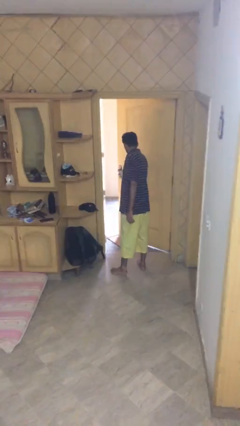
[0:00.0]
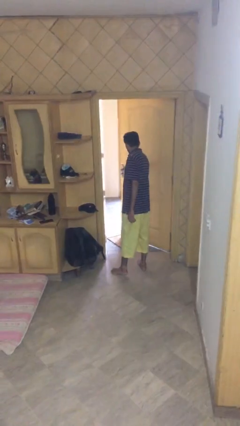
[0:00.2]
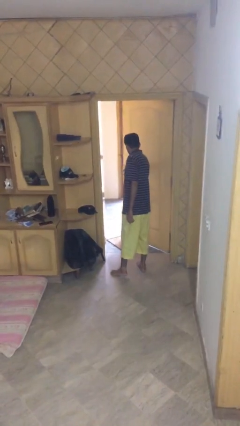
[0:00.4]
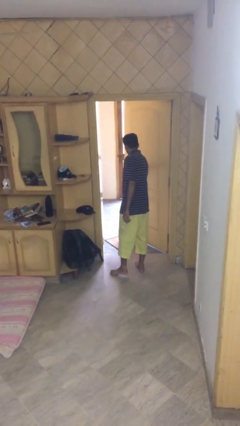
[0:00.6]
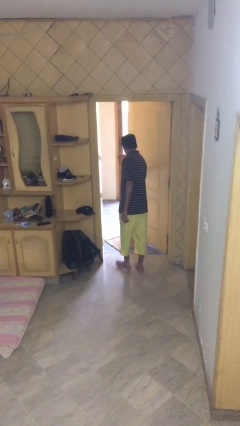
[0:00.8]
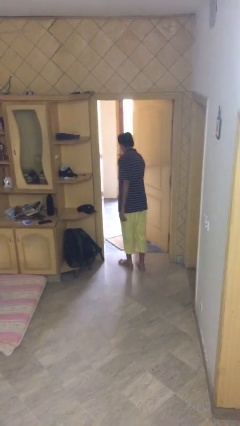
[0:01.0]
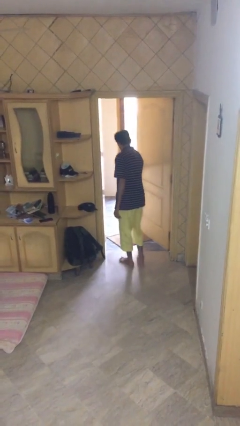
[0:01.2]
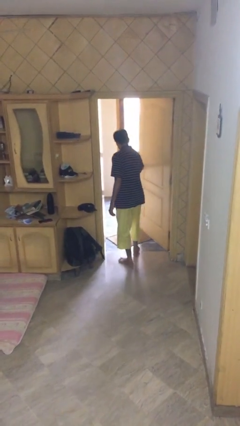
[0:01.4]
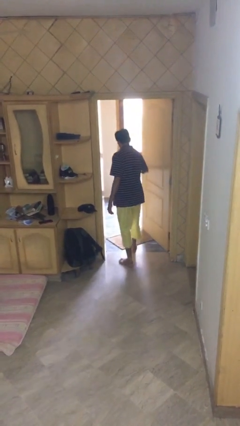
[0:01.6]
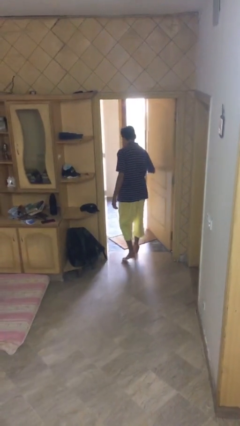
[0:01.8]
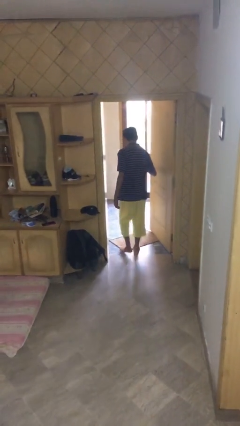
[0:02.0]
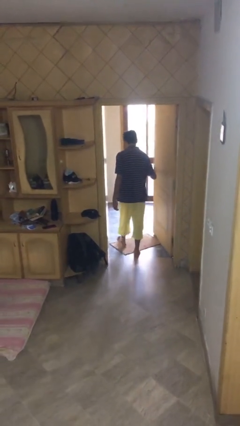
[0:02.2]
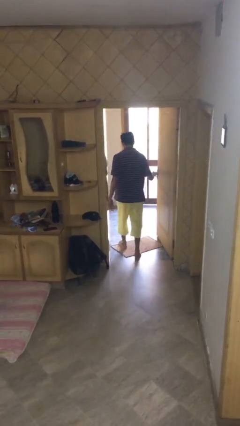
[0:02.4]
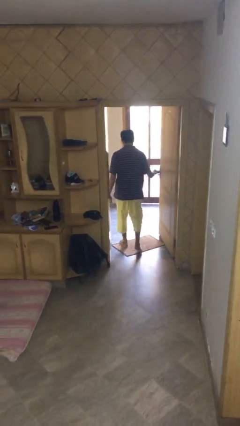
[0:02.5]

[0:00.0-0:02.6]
person exits scene through structure

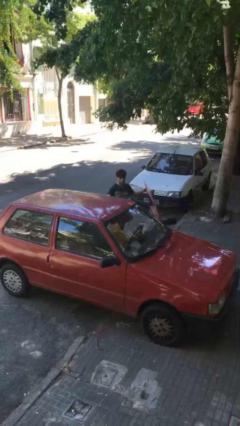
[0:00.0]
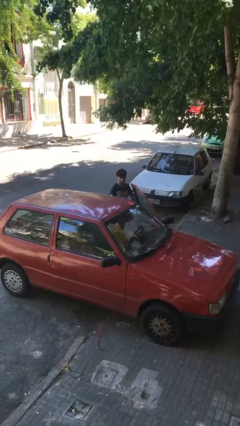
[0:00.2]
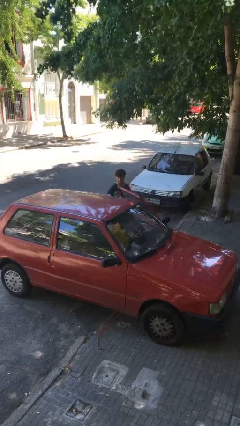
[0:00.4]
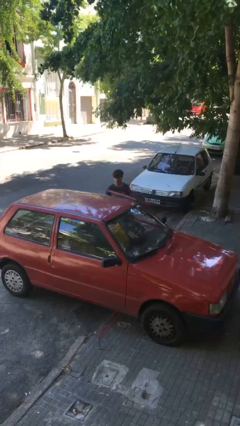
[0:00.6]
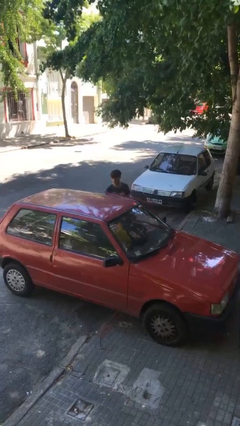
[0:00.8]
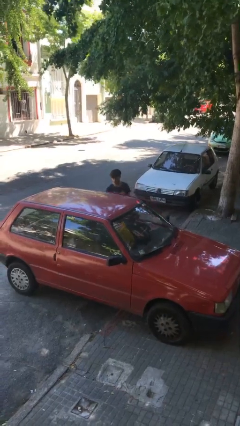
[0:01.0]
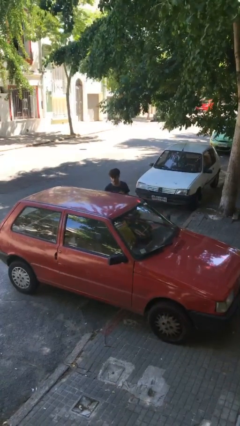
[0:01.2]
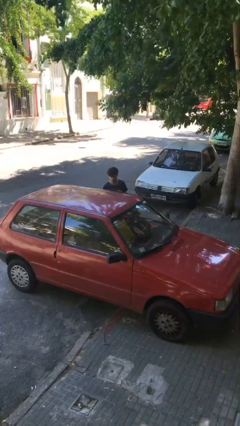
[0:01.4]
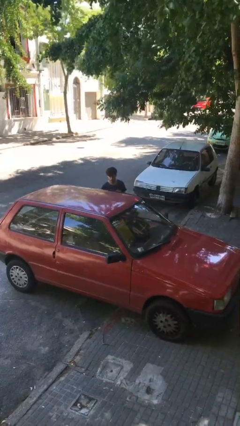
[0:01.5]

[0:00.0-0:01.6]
person closes car door

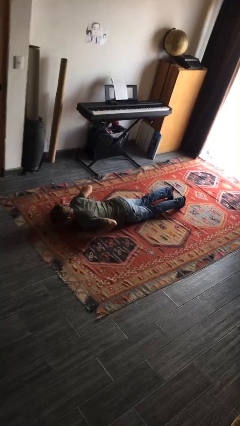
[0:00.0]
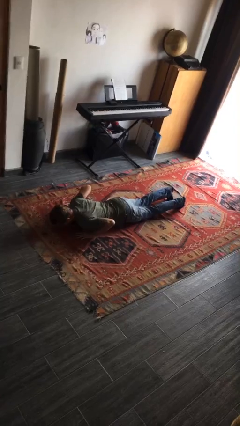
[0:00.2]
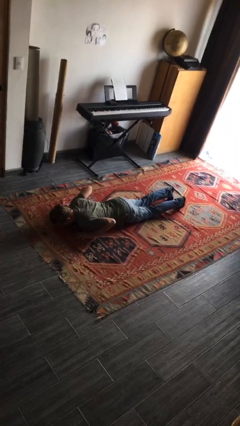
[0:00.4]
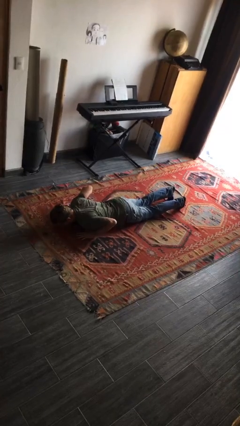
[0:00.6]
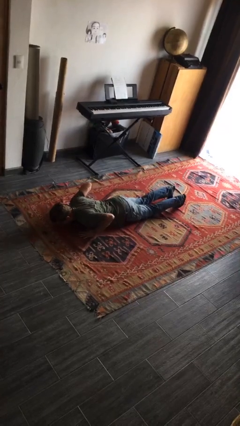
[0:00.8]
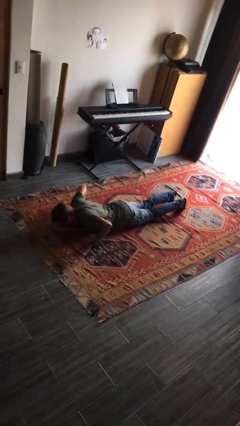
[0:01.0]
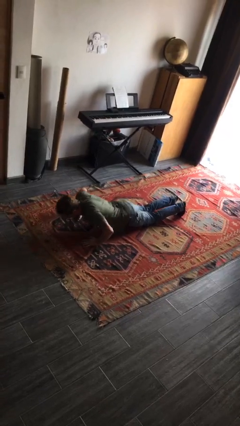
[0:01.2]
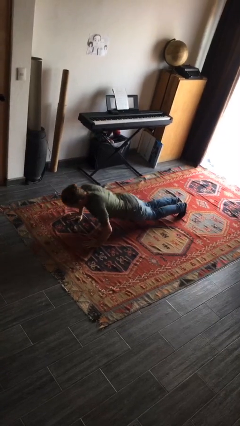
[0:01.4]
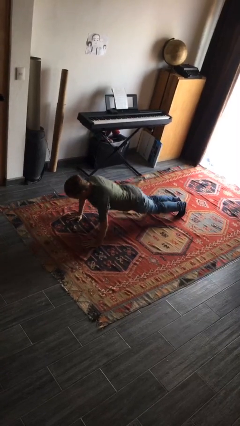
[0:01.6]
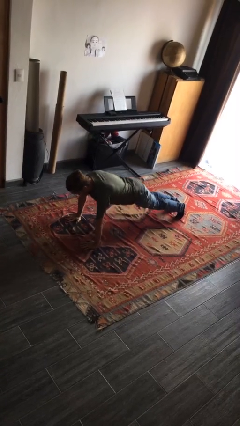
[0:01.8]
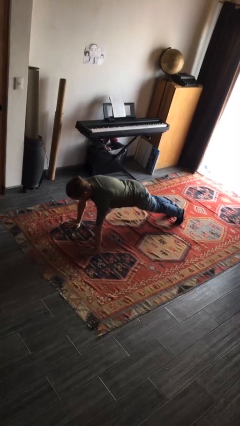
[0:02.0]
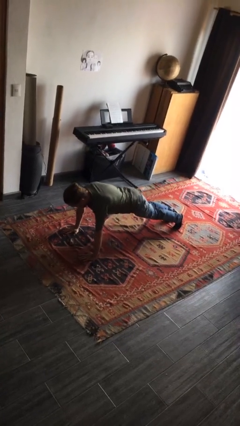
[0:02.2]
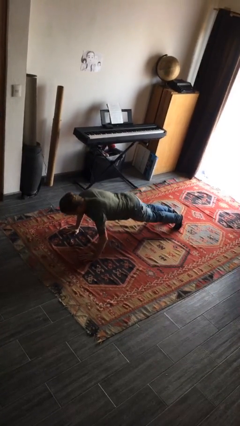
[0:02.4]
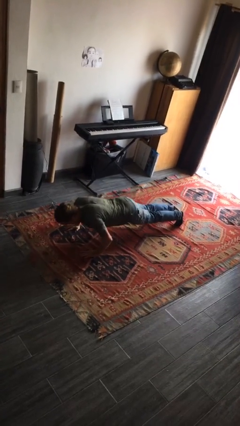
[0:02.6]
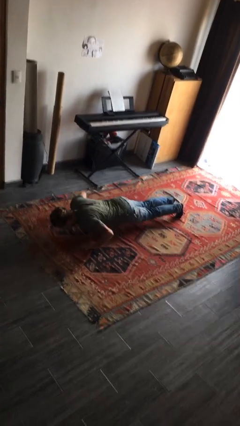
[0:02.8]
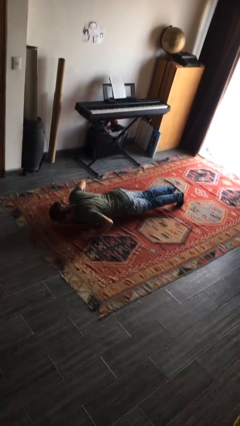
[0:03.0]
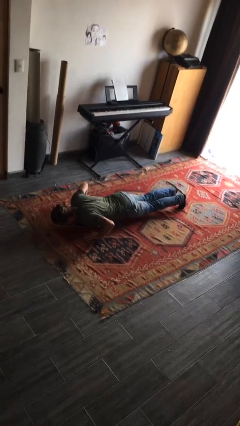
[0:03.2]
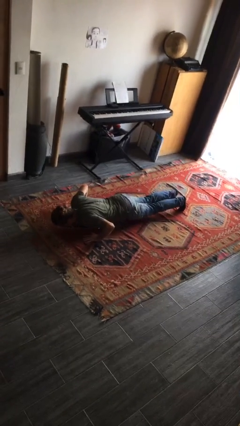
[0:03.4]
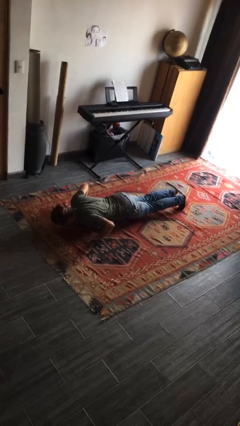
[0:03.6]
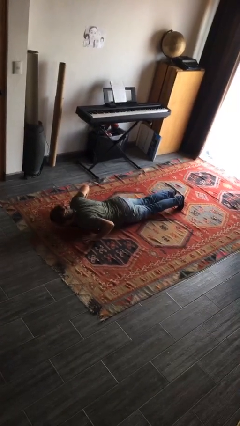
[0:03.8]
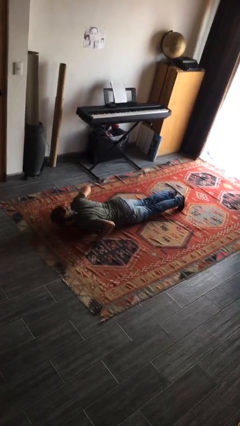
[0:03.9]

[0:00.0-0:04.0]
person exercises with pushup

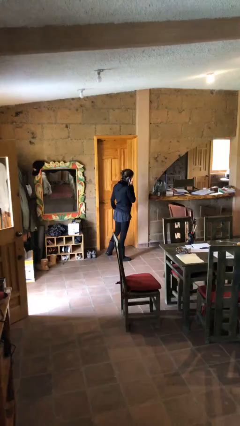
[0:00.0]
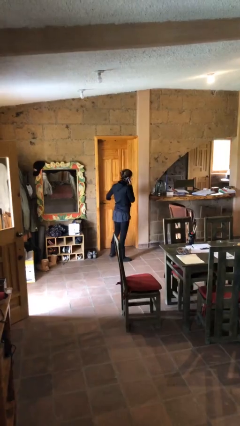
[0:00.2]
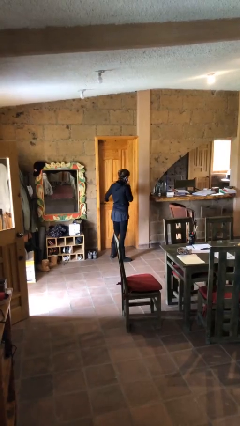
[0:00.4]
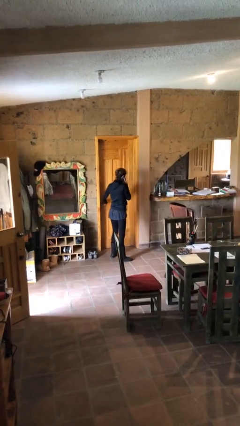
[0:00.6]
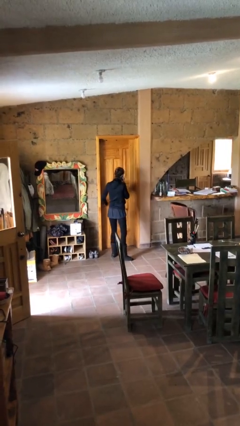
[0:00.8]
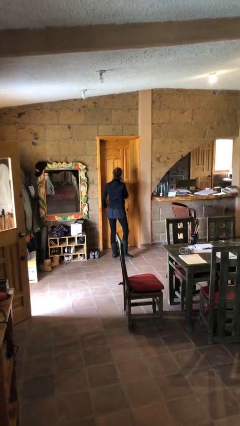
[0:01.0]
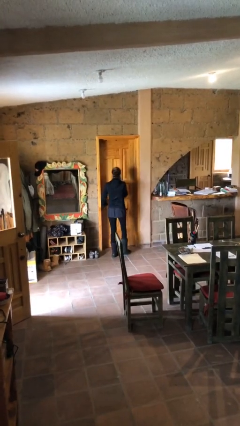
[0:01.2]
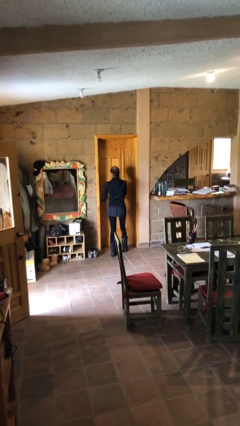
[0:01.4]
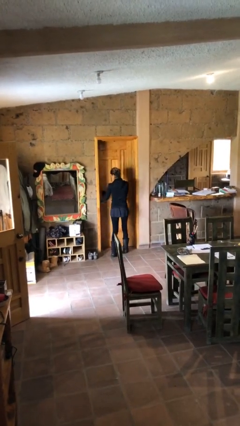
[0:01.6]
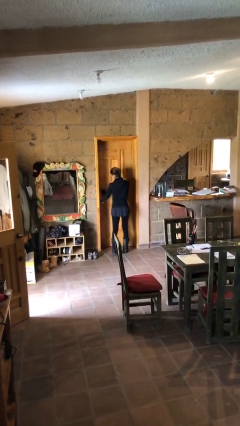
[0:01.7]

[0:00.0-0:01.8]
person opens facility door

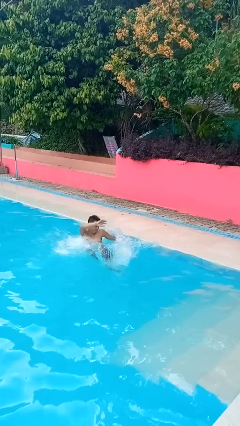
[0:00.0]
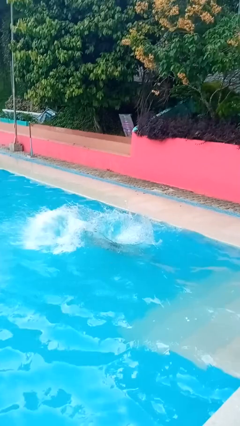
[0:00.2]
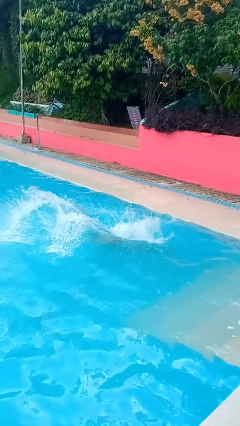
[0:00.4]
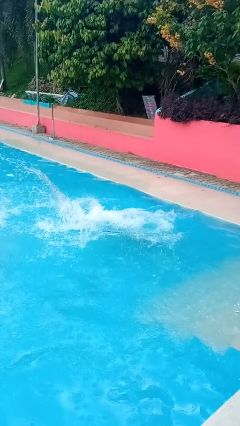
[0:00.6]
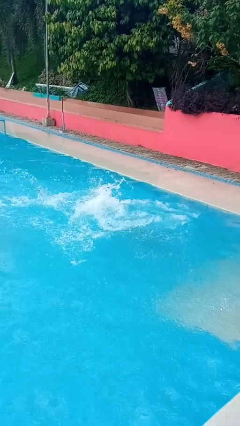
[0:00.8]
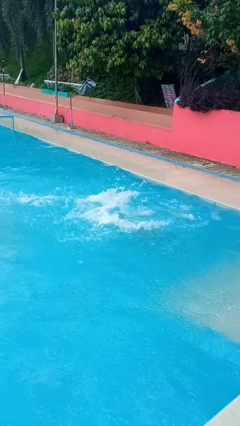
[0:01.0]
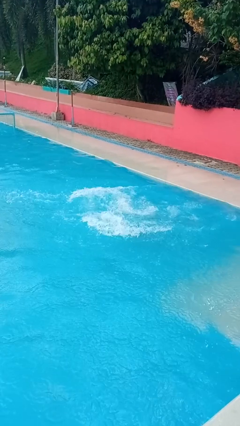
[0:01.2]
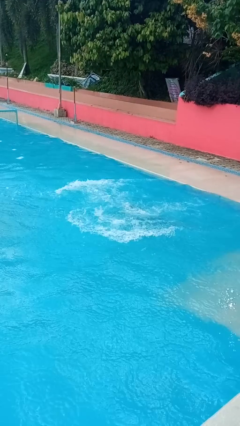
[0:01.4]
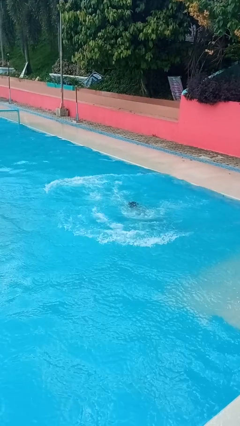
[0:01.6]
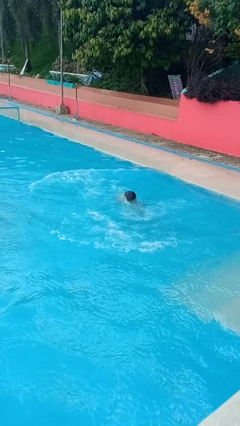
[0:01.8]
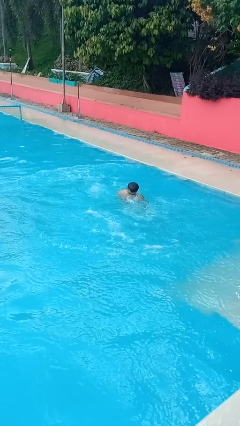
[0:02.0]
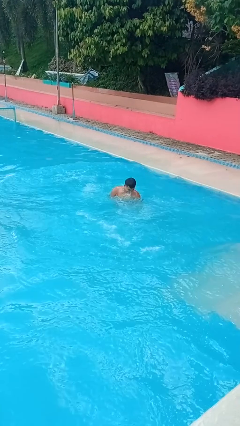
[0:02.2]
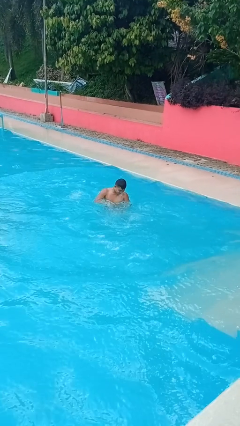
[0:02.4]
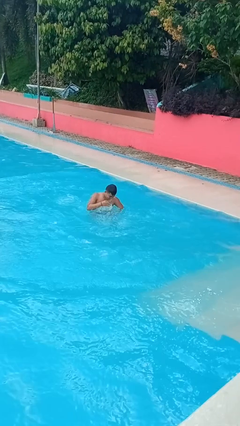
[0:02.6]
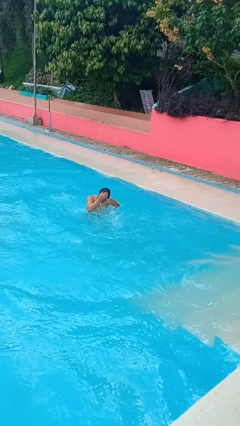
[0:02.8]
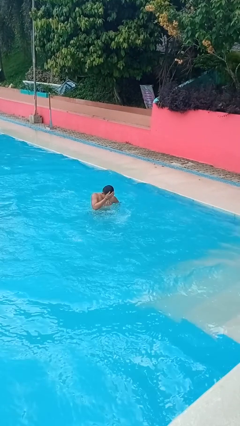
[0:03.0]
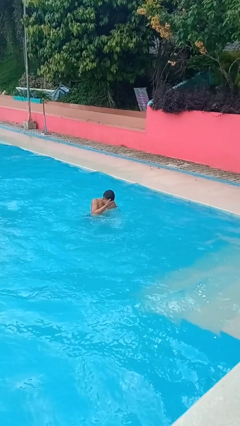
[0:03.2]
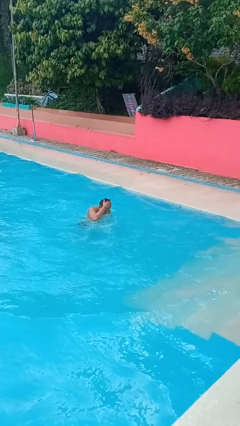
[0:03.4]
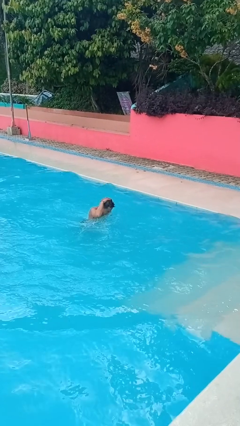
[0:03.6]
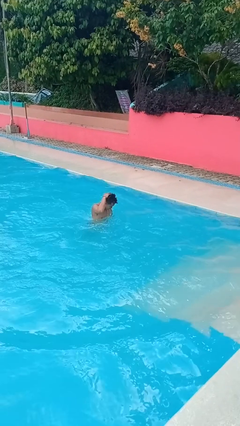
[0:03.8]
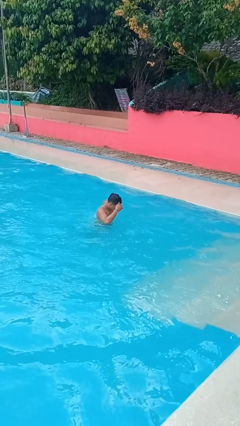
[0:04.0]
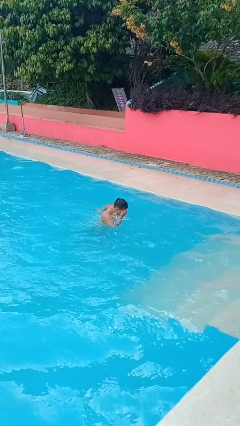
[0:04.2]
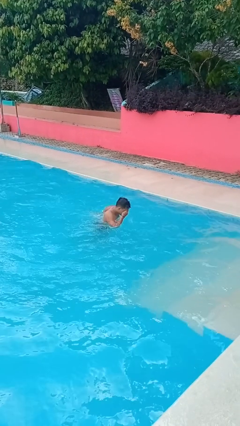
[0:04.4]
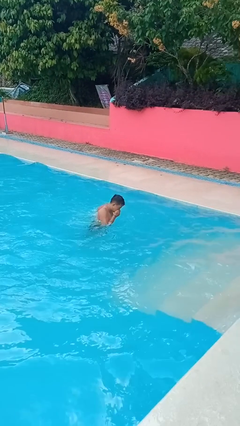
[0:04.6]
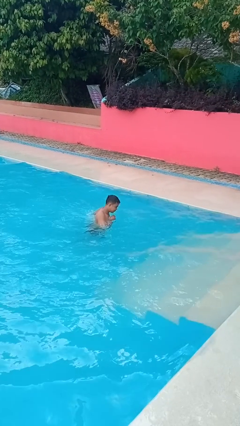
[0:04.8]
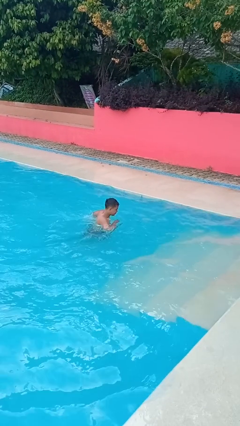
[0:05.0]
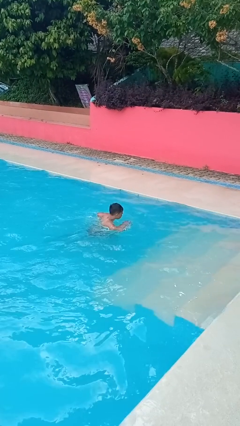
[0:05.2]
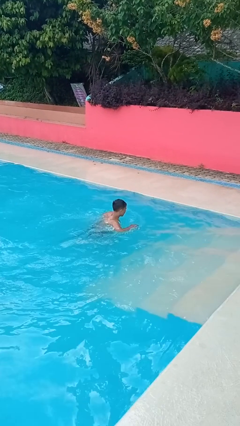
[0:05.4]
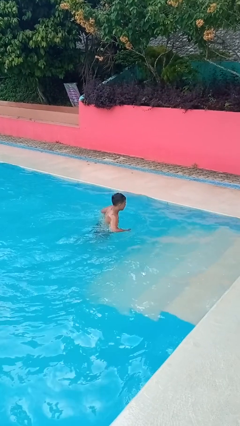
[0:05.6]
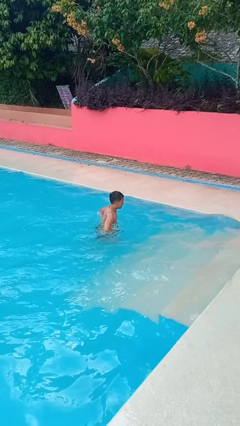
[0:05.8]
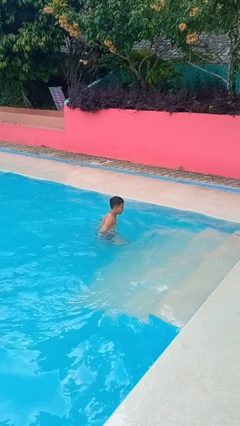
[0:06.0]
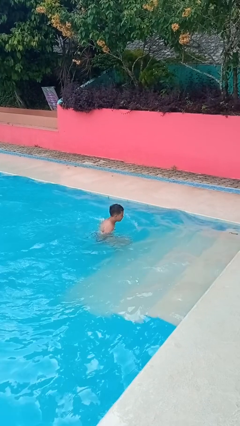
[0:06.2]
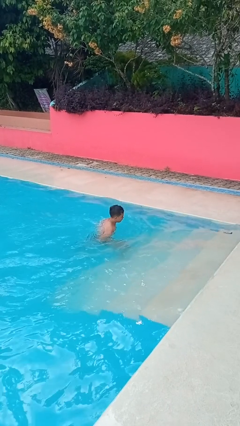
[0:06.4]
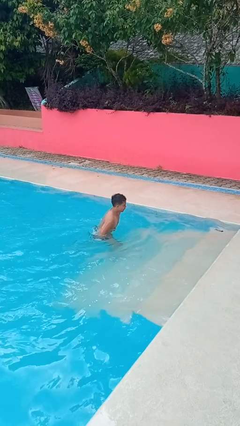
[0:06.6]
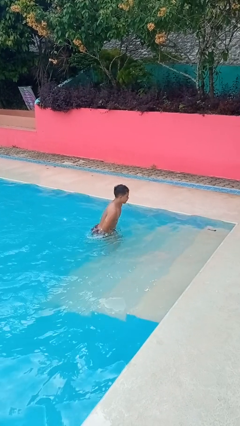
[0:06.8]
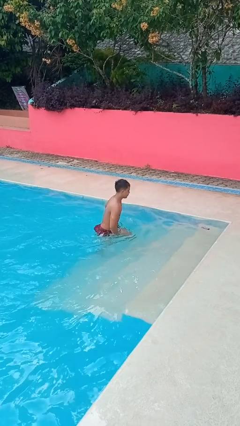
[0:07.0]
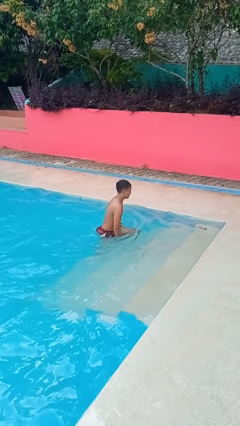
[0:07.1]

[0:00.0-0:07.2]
person falls into pool

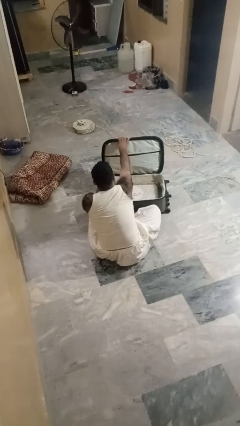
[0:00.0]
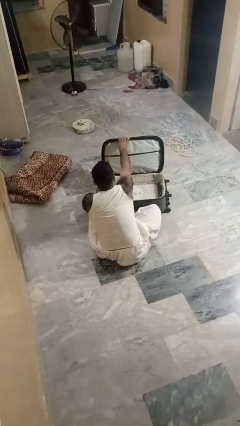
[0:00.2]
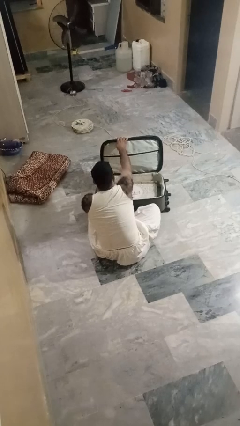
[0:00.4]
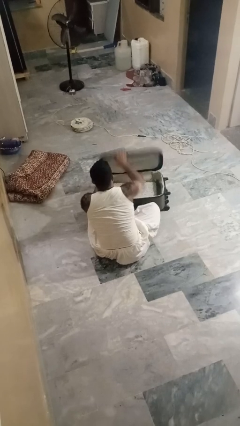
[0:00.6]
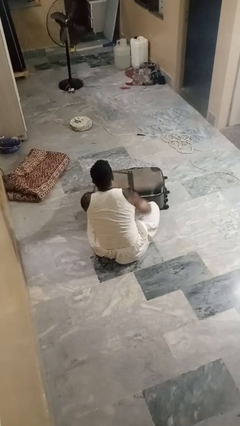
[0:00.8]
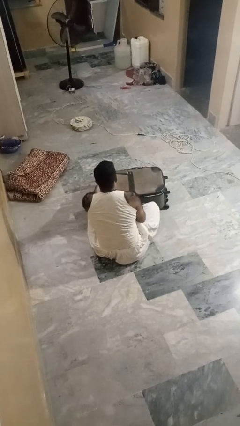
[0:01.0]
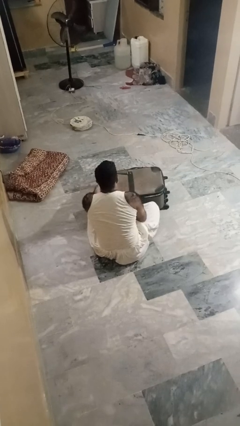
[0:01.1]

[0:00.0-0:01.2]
person closes suitcase
